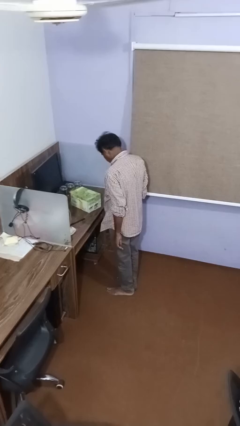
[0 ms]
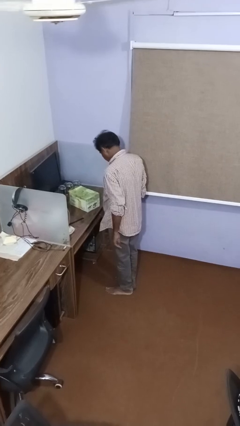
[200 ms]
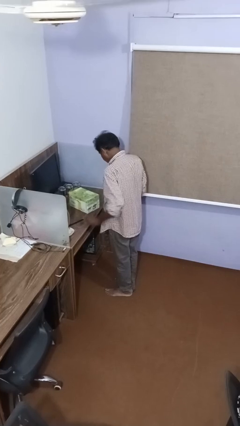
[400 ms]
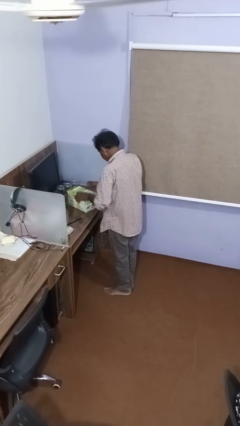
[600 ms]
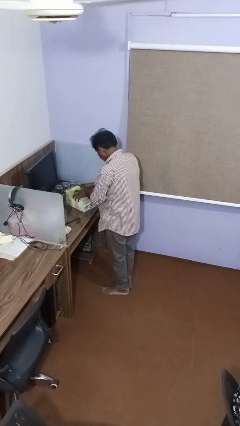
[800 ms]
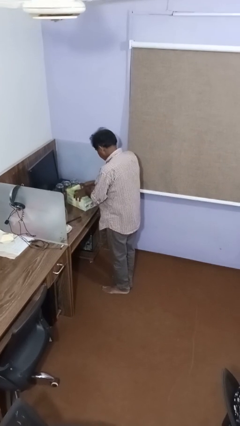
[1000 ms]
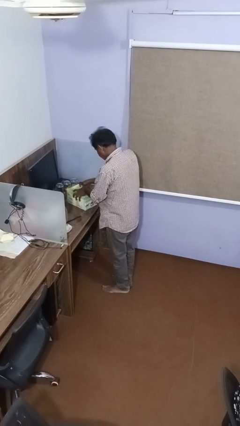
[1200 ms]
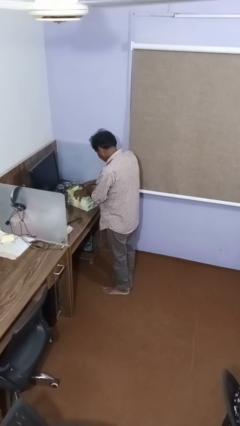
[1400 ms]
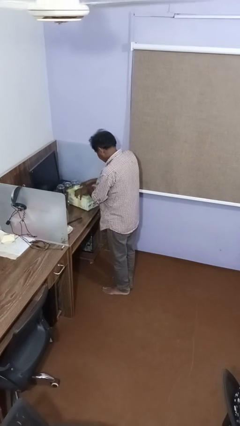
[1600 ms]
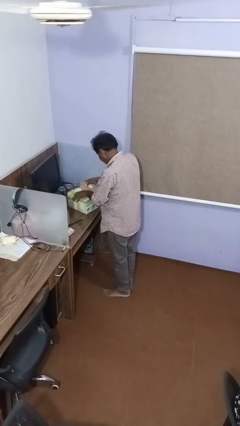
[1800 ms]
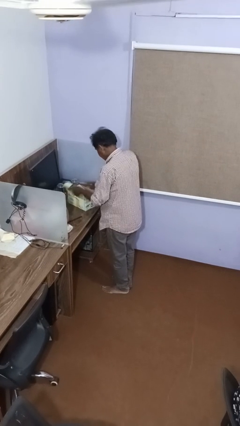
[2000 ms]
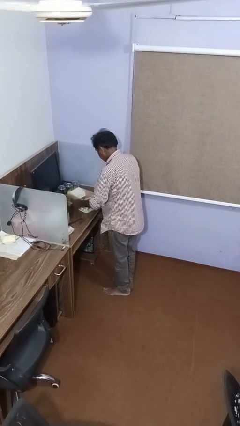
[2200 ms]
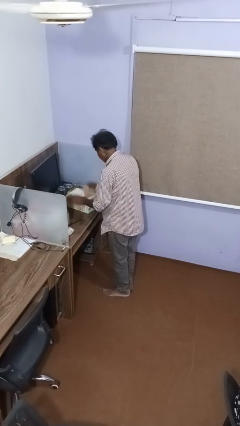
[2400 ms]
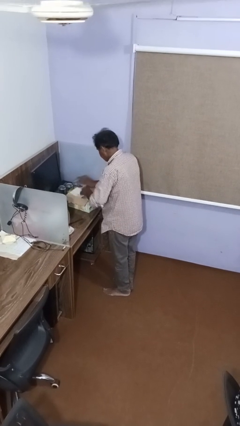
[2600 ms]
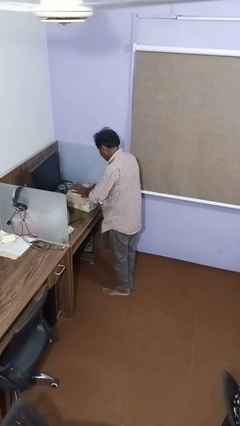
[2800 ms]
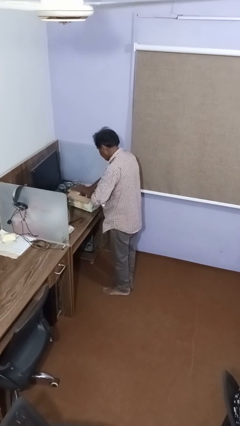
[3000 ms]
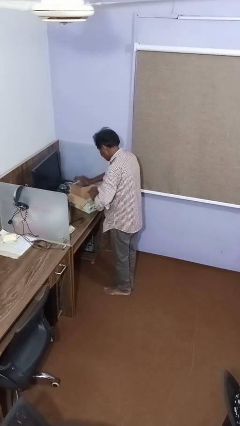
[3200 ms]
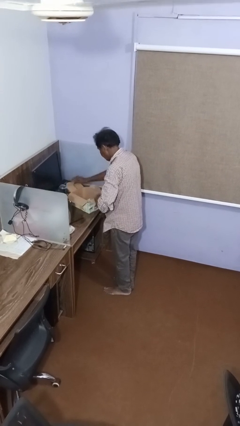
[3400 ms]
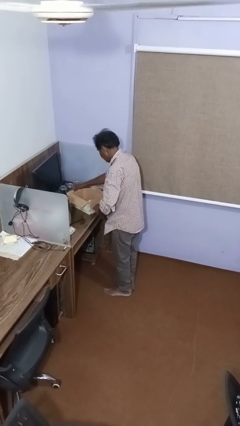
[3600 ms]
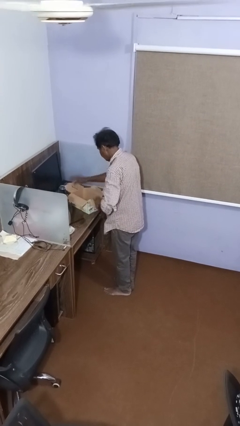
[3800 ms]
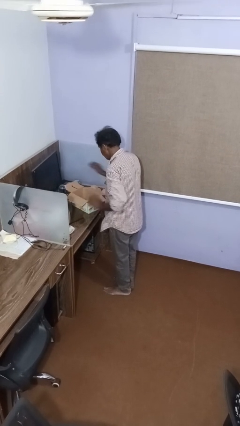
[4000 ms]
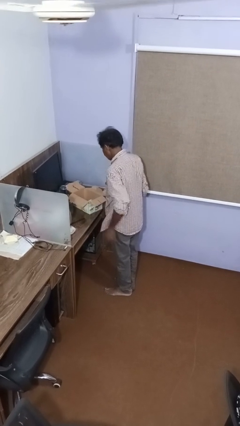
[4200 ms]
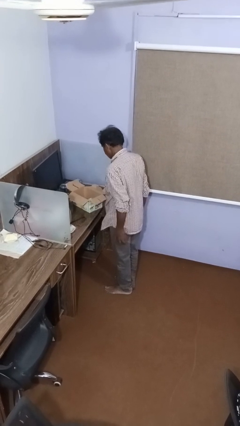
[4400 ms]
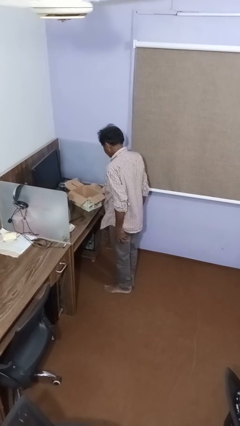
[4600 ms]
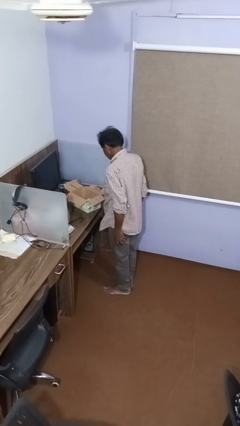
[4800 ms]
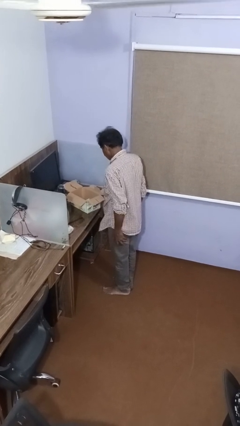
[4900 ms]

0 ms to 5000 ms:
person opens box

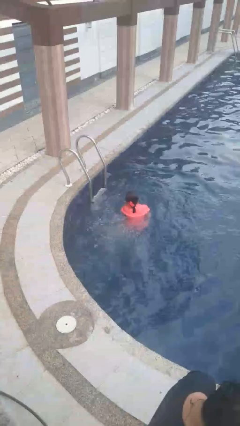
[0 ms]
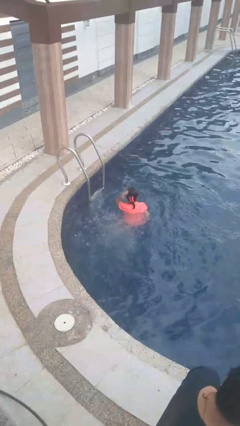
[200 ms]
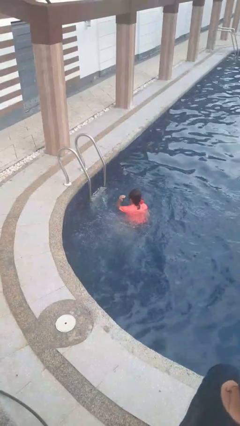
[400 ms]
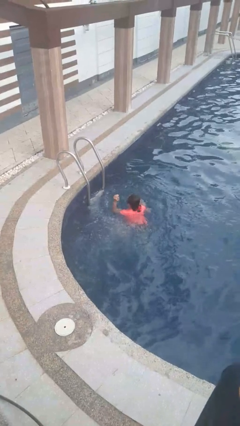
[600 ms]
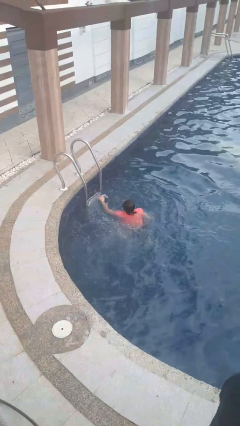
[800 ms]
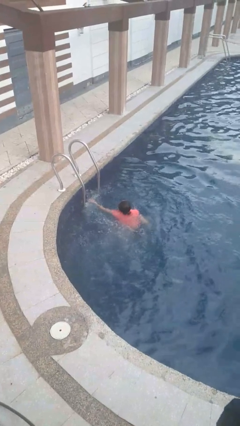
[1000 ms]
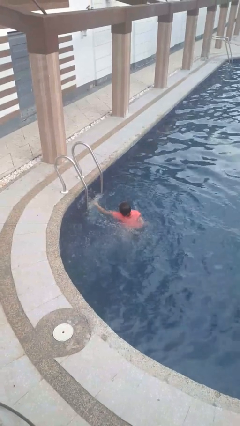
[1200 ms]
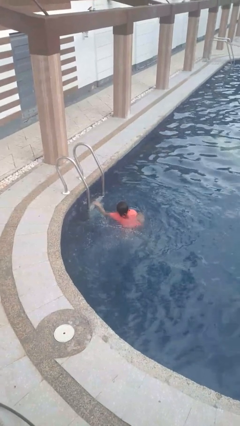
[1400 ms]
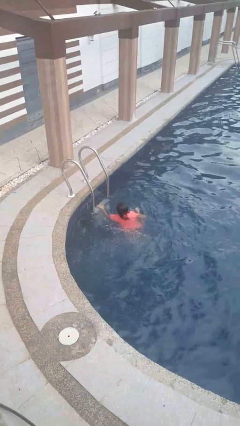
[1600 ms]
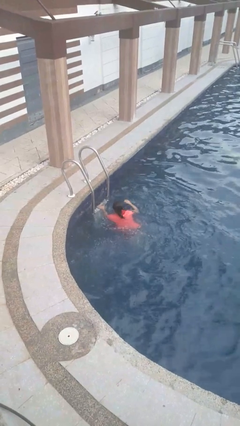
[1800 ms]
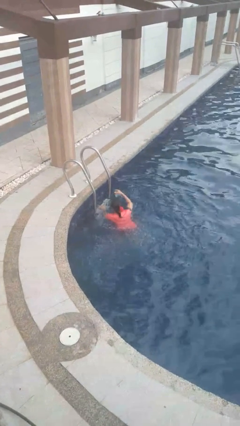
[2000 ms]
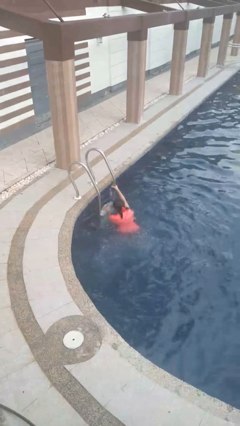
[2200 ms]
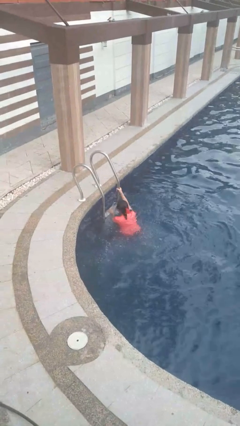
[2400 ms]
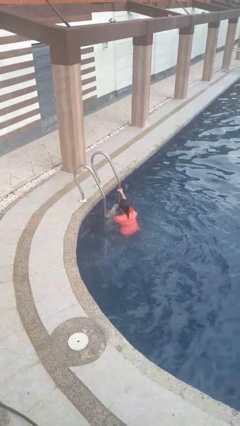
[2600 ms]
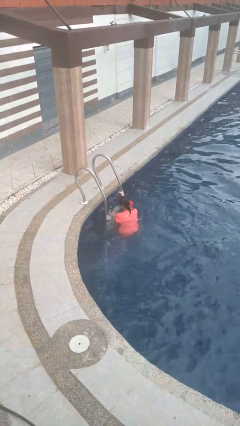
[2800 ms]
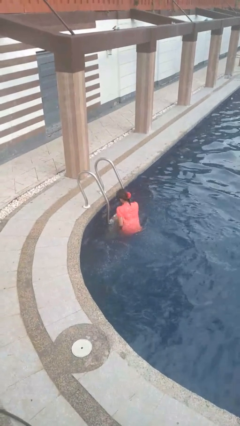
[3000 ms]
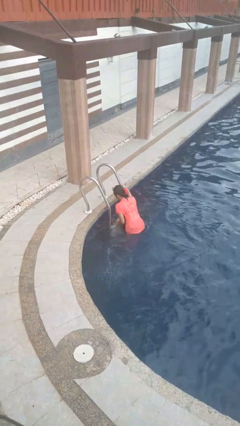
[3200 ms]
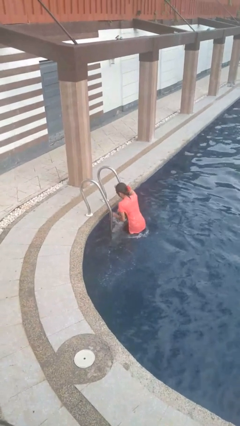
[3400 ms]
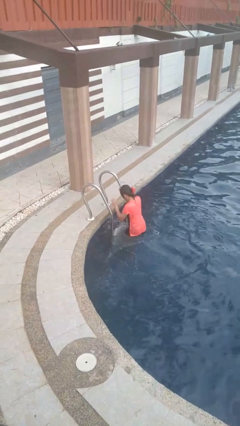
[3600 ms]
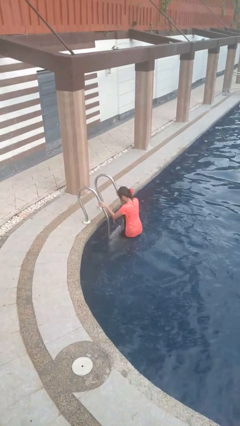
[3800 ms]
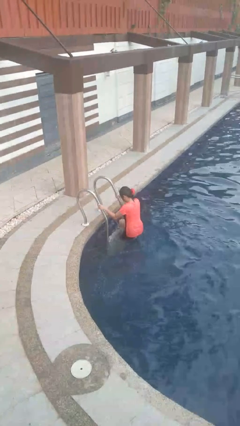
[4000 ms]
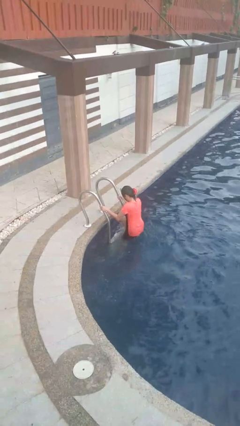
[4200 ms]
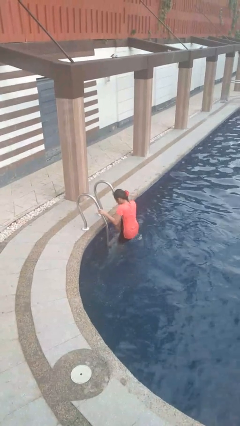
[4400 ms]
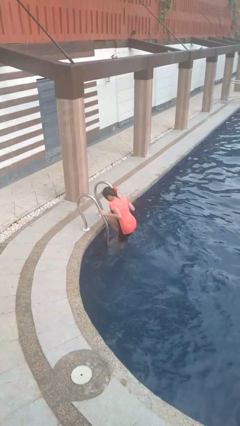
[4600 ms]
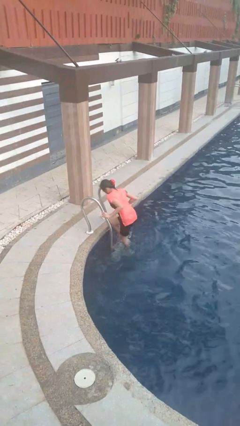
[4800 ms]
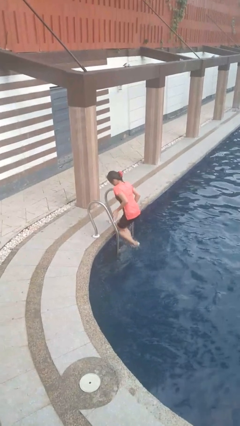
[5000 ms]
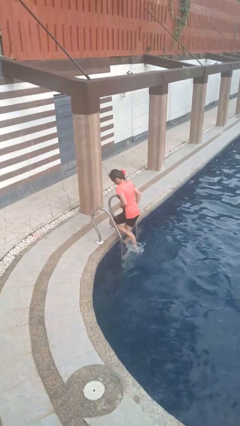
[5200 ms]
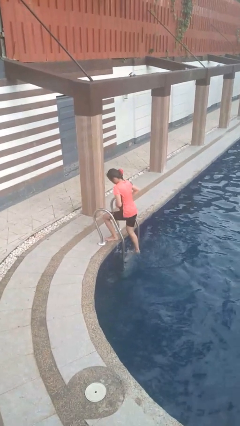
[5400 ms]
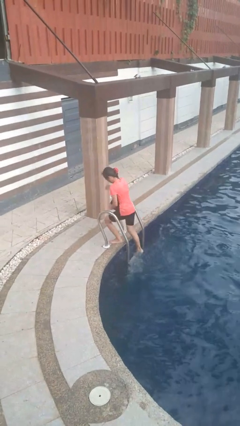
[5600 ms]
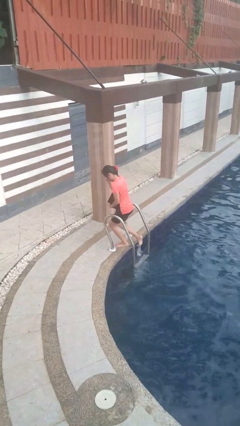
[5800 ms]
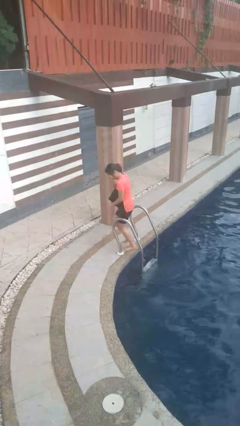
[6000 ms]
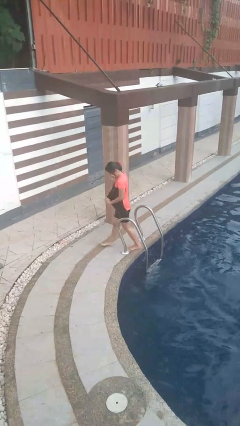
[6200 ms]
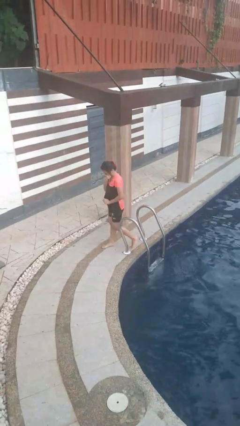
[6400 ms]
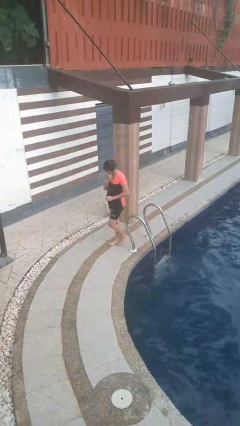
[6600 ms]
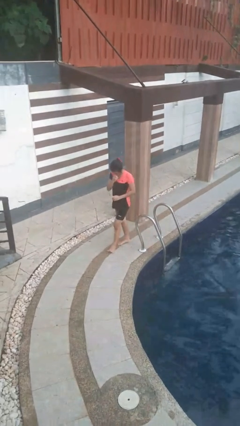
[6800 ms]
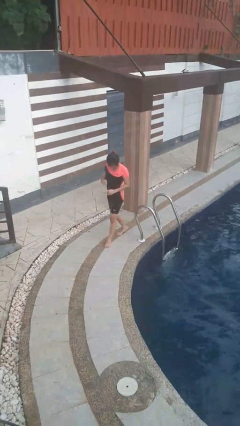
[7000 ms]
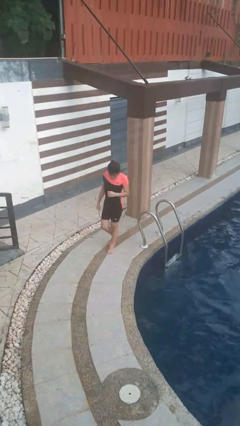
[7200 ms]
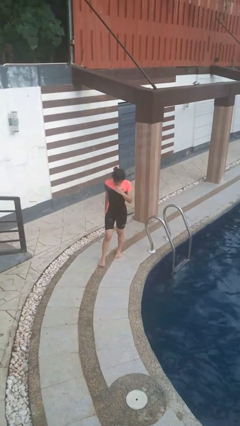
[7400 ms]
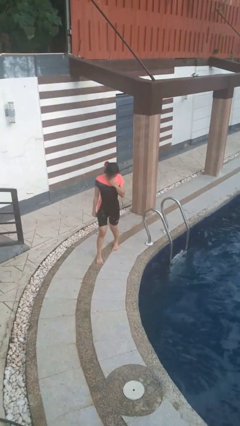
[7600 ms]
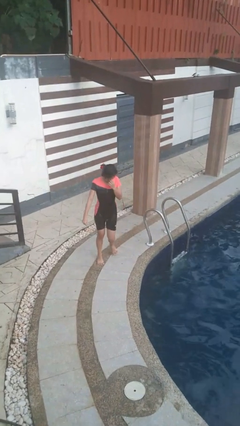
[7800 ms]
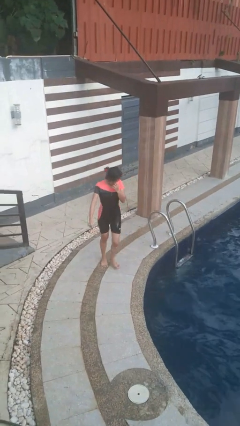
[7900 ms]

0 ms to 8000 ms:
person exits pool

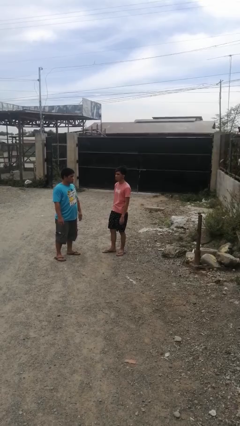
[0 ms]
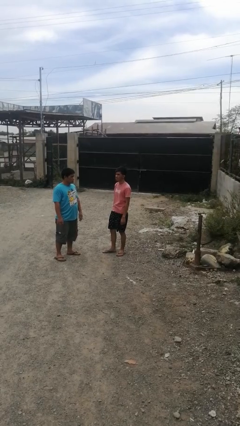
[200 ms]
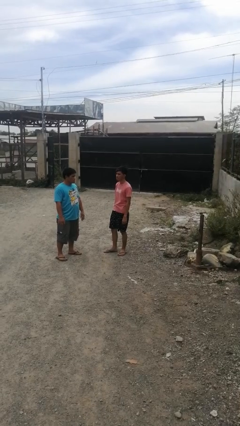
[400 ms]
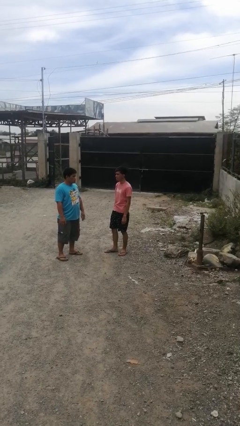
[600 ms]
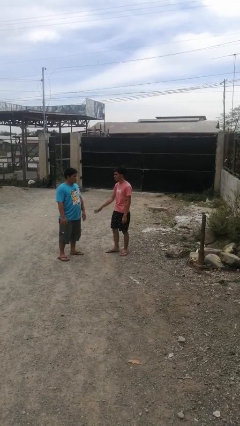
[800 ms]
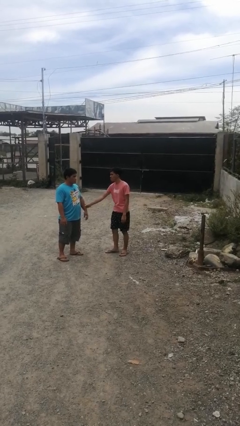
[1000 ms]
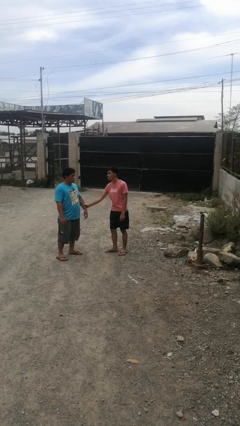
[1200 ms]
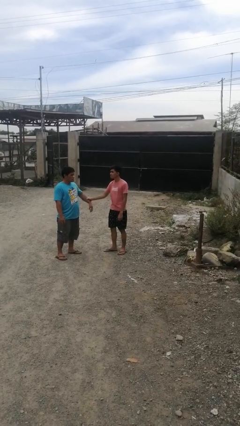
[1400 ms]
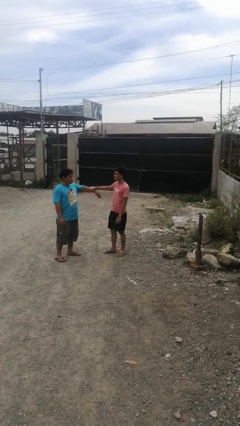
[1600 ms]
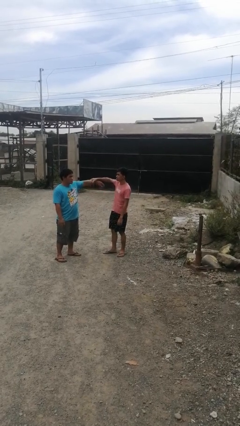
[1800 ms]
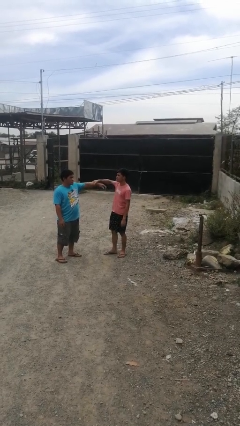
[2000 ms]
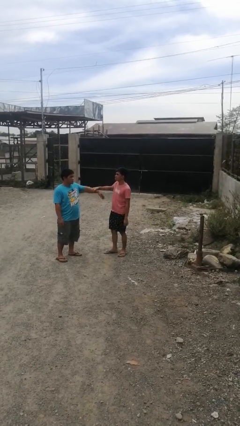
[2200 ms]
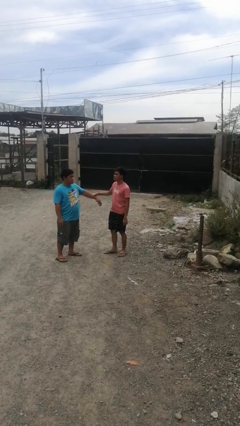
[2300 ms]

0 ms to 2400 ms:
person grabs person by forearm

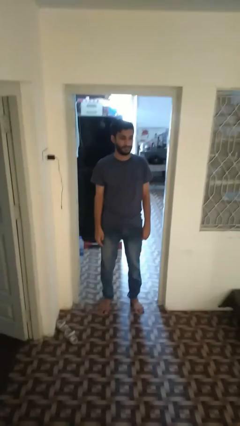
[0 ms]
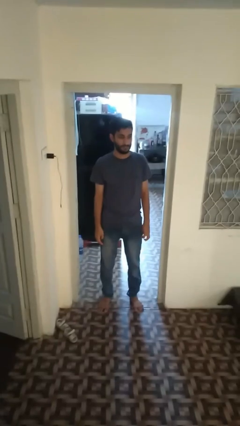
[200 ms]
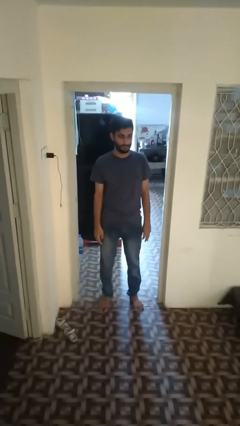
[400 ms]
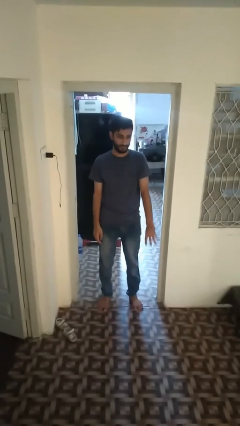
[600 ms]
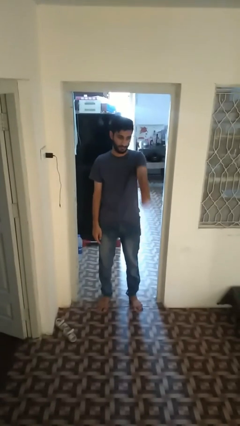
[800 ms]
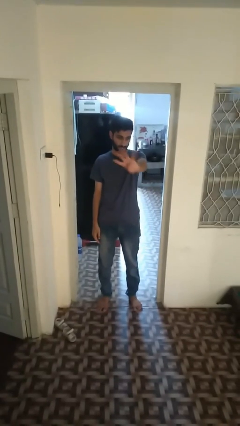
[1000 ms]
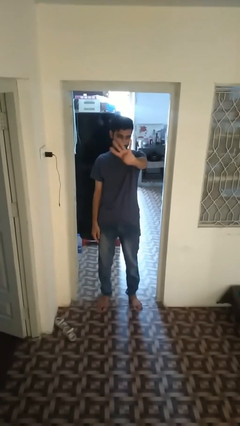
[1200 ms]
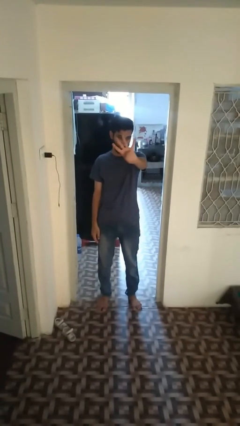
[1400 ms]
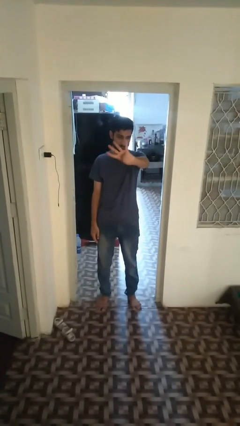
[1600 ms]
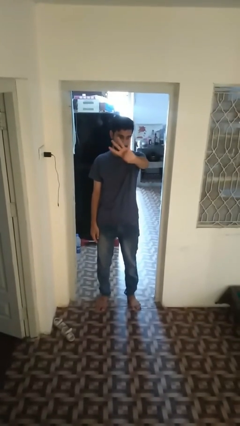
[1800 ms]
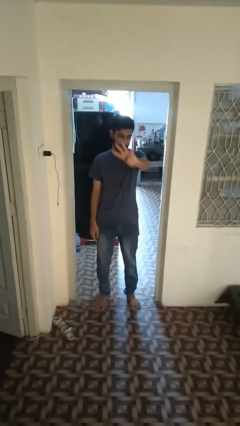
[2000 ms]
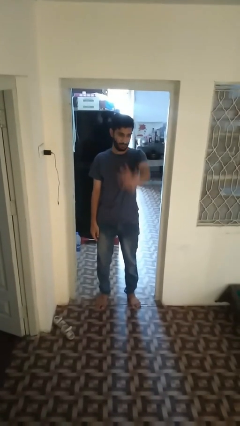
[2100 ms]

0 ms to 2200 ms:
person gestures number four

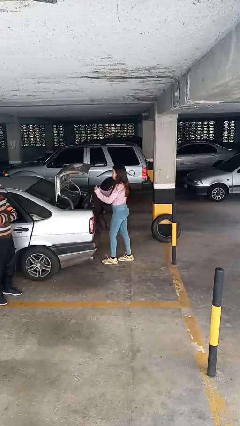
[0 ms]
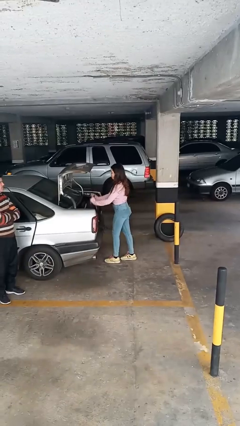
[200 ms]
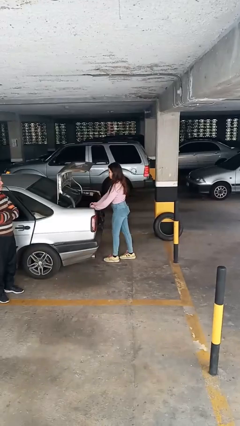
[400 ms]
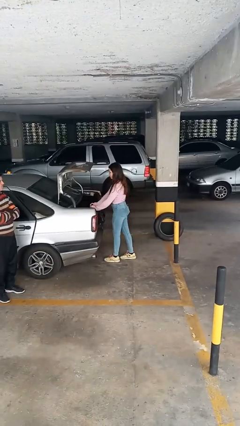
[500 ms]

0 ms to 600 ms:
person loads car
